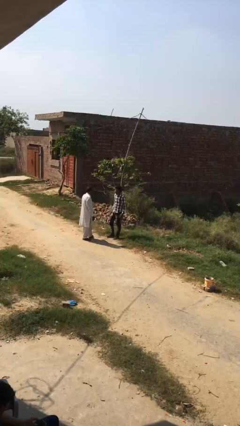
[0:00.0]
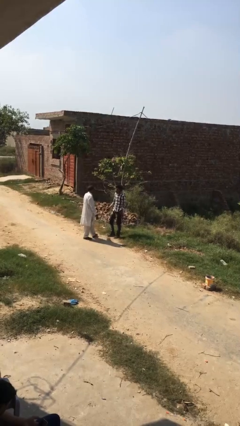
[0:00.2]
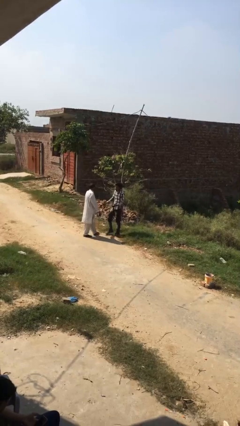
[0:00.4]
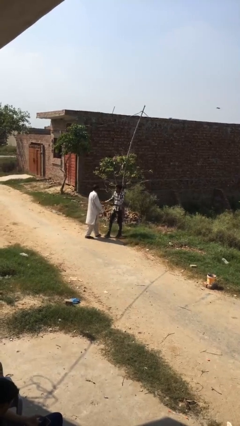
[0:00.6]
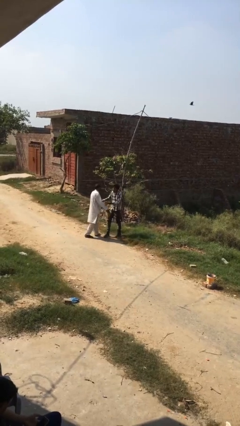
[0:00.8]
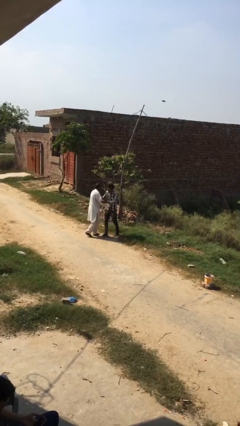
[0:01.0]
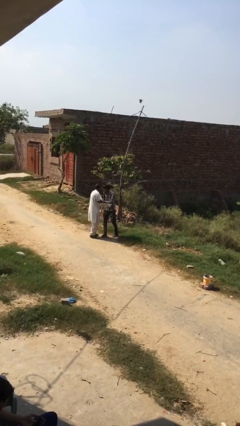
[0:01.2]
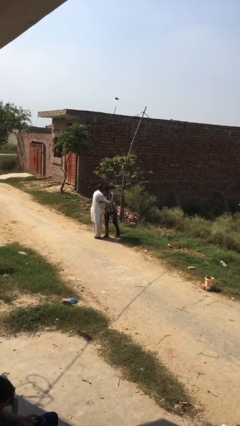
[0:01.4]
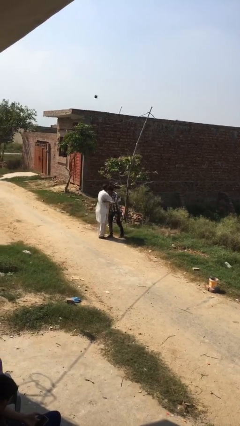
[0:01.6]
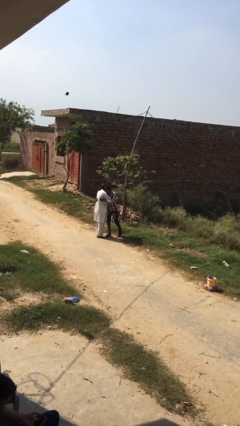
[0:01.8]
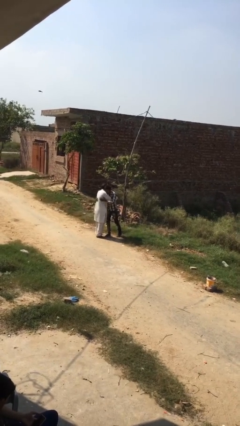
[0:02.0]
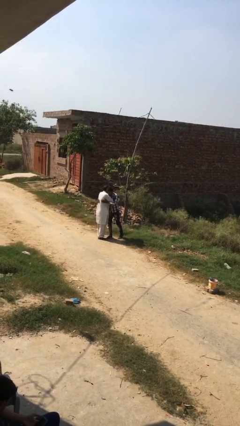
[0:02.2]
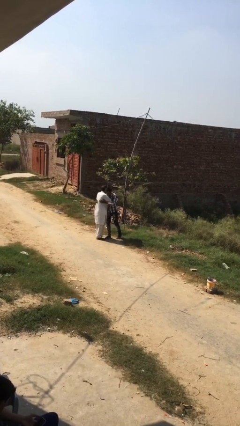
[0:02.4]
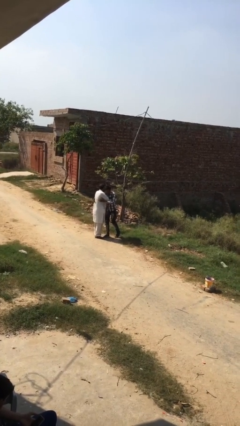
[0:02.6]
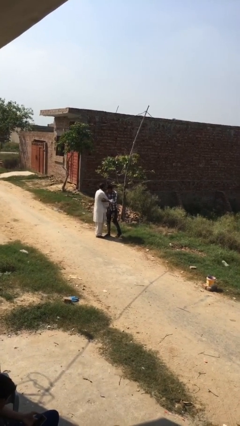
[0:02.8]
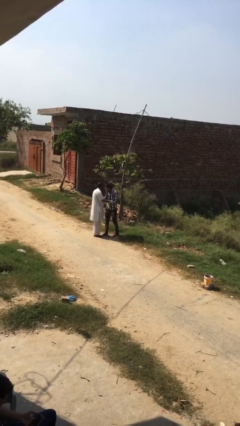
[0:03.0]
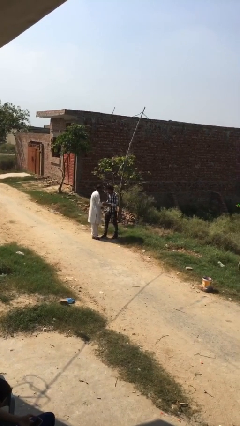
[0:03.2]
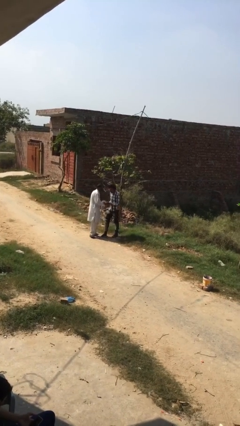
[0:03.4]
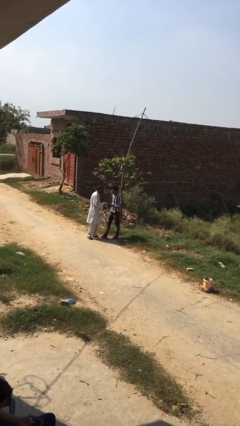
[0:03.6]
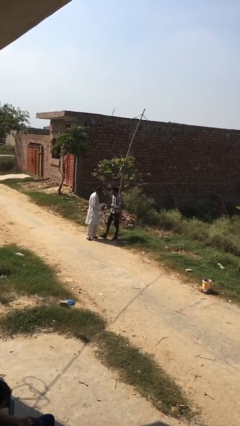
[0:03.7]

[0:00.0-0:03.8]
person embraces person

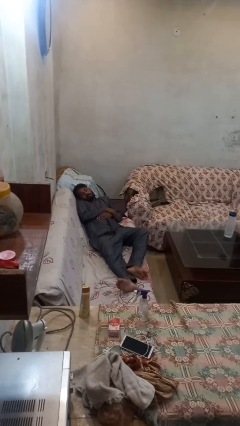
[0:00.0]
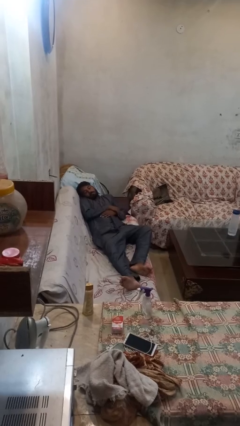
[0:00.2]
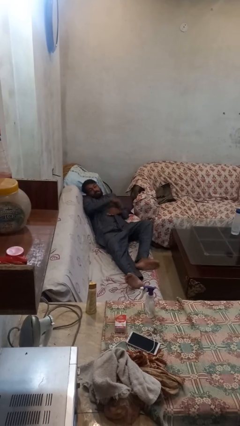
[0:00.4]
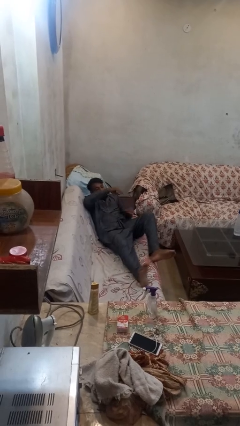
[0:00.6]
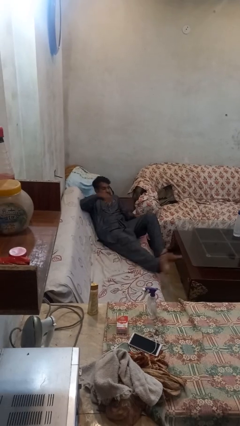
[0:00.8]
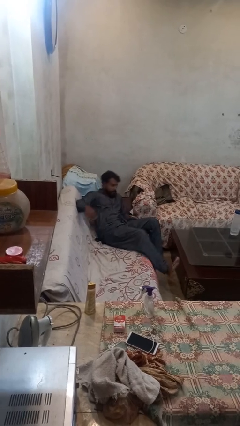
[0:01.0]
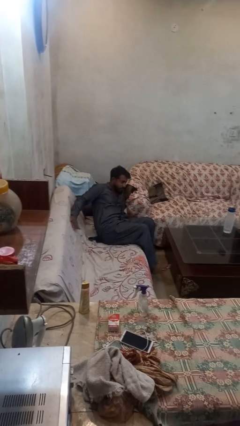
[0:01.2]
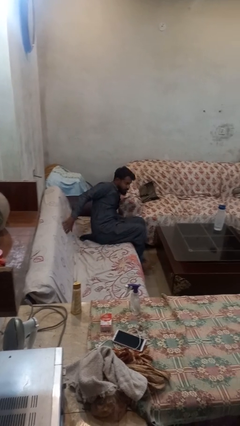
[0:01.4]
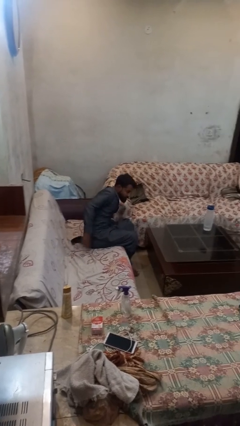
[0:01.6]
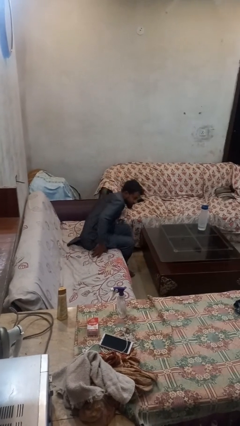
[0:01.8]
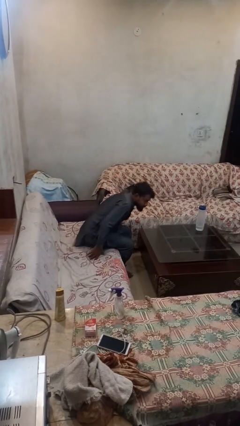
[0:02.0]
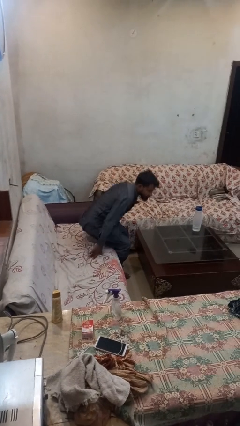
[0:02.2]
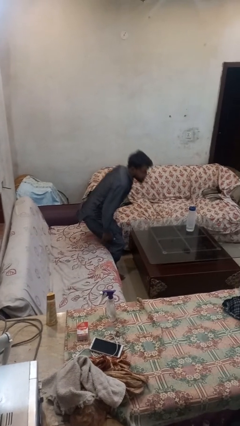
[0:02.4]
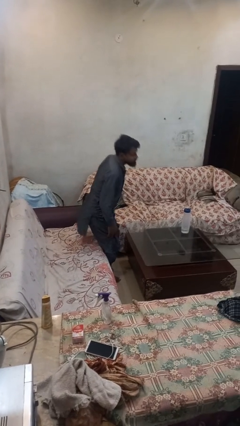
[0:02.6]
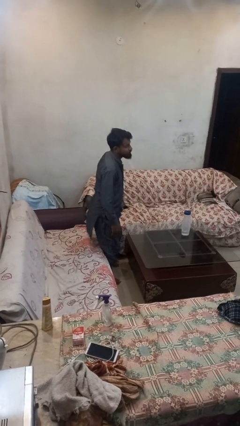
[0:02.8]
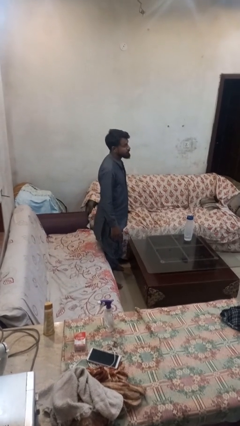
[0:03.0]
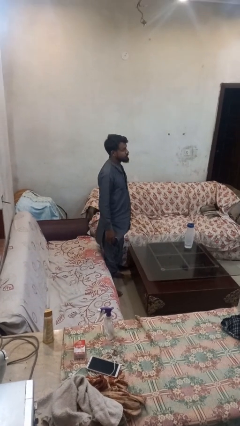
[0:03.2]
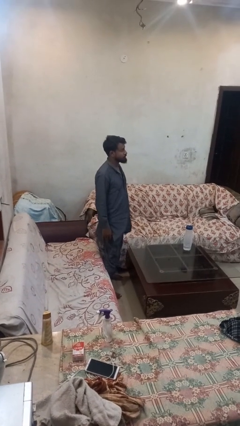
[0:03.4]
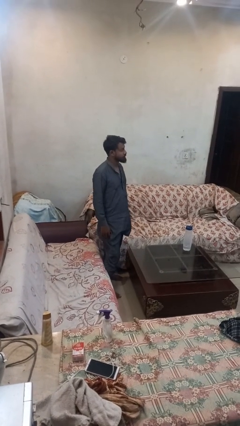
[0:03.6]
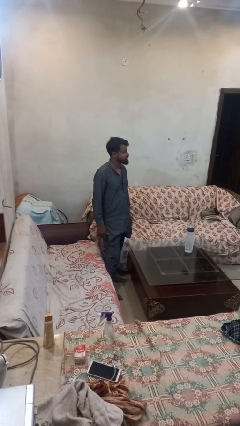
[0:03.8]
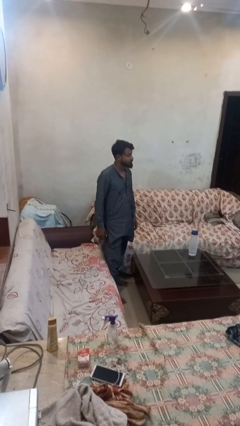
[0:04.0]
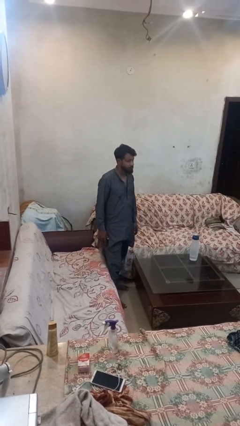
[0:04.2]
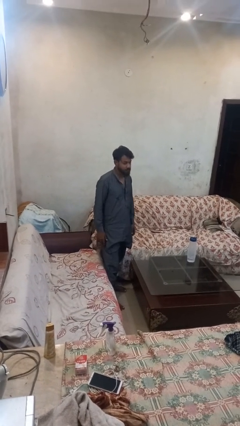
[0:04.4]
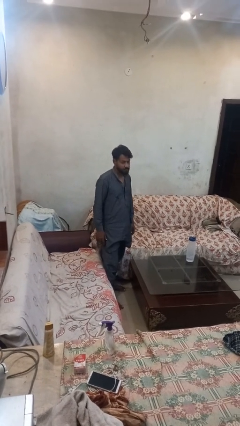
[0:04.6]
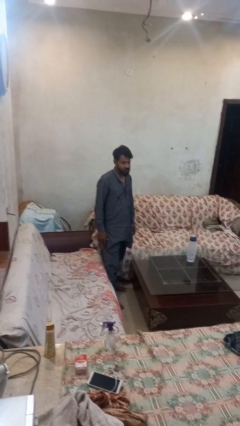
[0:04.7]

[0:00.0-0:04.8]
person stands up

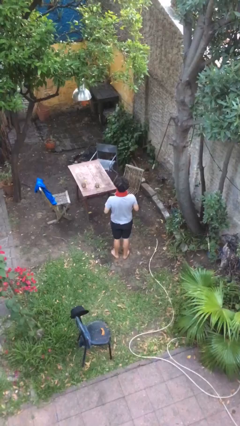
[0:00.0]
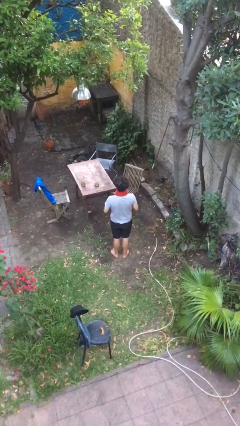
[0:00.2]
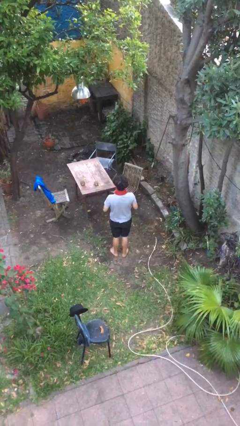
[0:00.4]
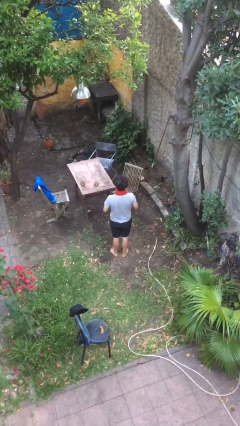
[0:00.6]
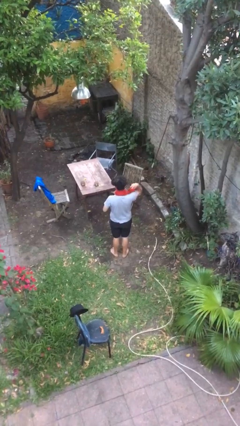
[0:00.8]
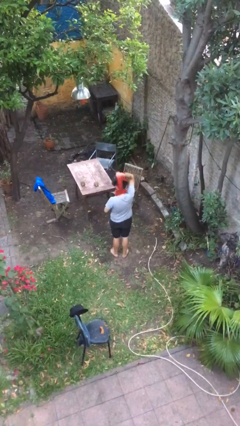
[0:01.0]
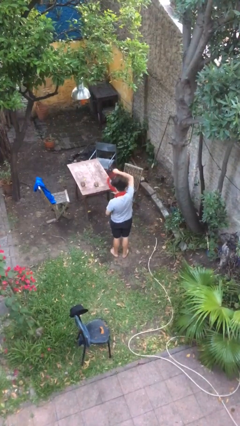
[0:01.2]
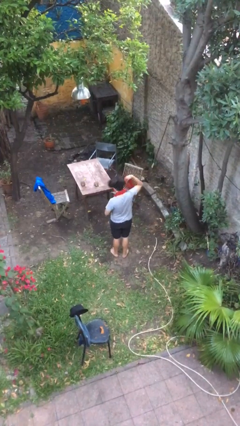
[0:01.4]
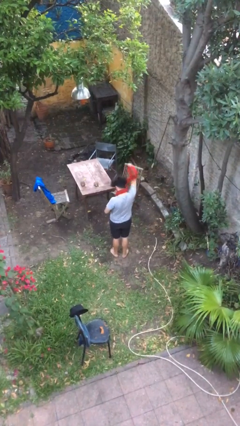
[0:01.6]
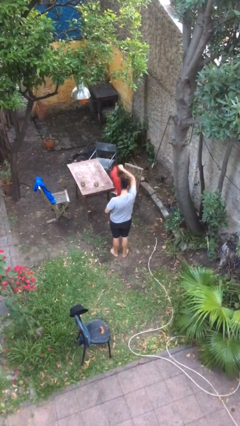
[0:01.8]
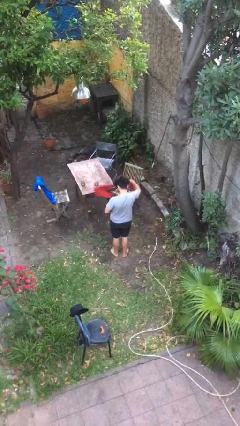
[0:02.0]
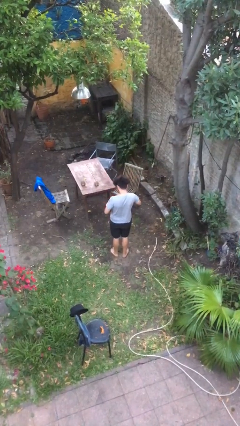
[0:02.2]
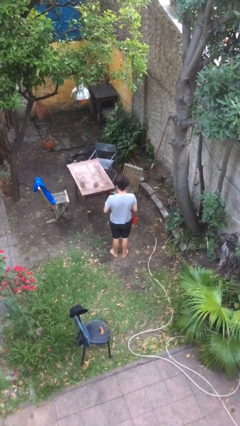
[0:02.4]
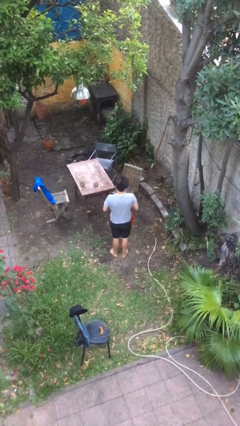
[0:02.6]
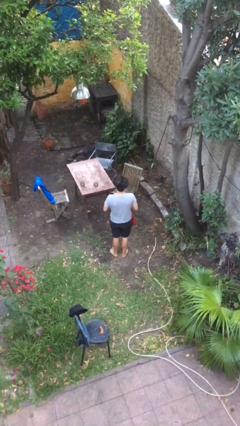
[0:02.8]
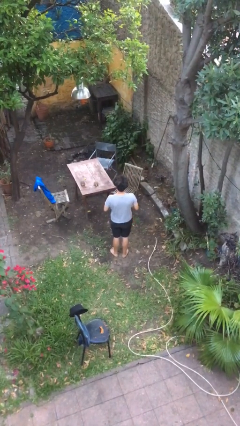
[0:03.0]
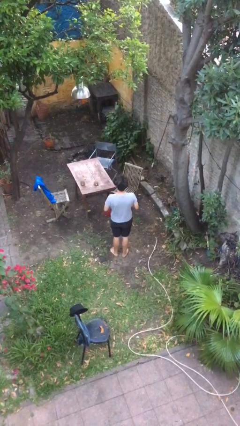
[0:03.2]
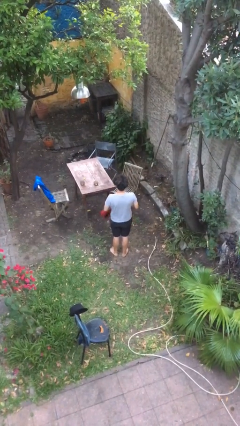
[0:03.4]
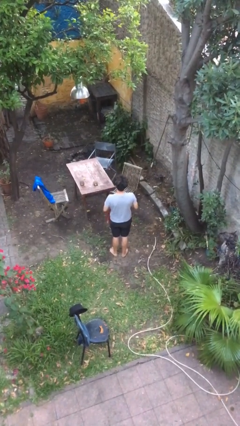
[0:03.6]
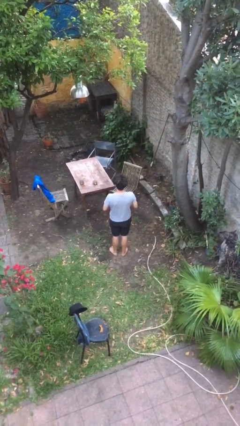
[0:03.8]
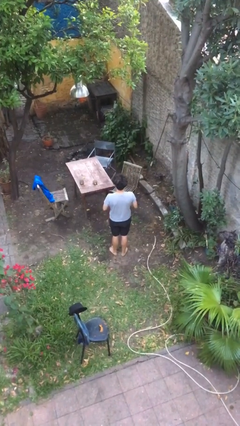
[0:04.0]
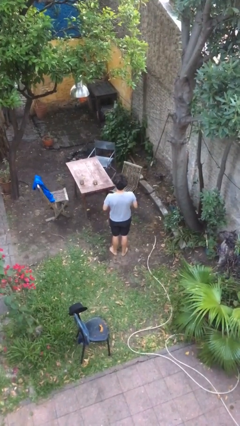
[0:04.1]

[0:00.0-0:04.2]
person takes off scarf

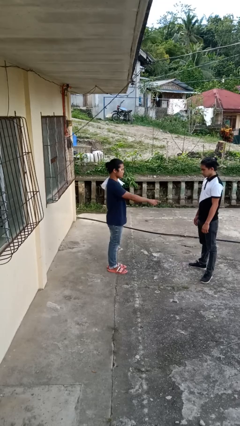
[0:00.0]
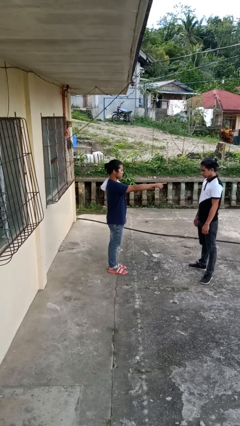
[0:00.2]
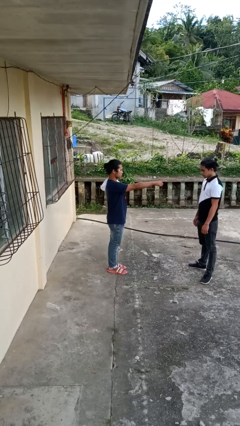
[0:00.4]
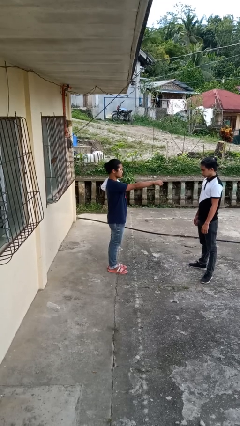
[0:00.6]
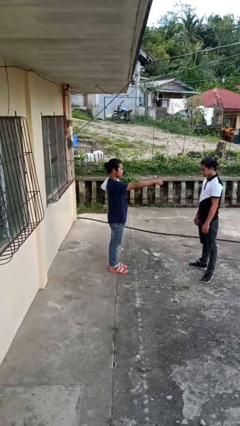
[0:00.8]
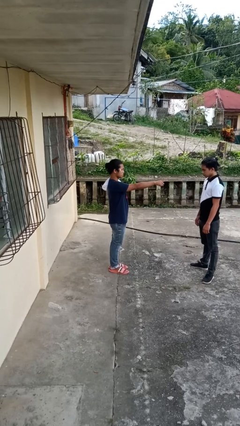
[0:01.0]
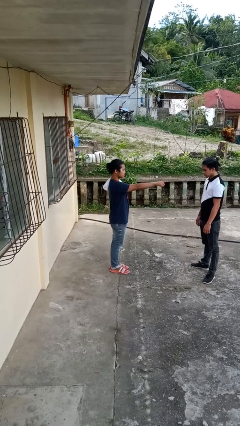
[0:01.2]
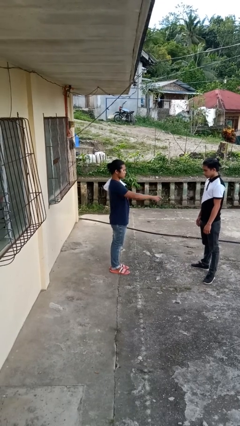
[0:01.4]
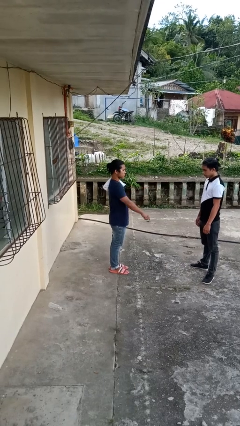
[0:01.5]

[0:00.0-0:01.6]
person points at person

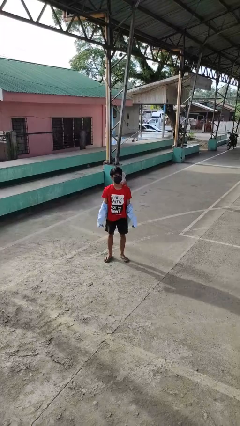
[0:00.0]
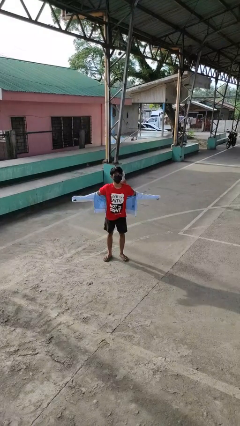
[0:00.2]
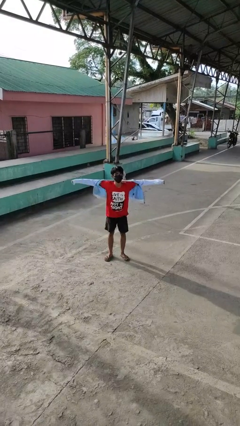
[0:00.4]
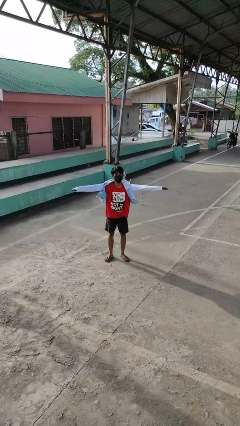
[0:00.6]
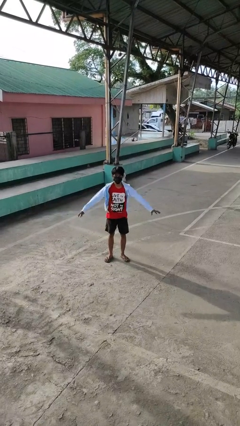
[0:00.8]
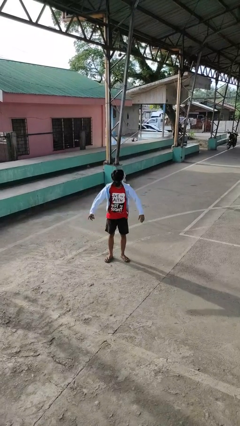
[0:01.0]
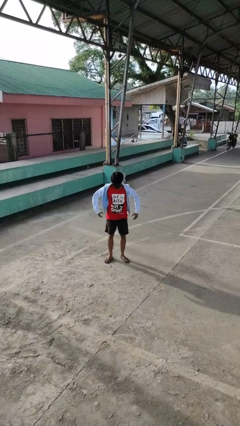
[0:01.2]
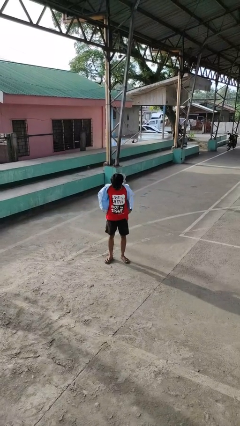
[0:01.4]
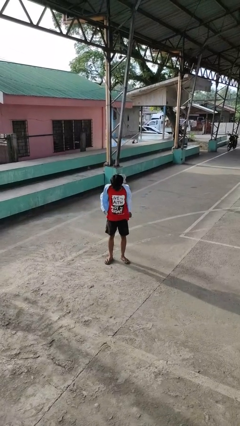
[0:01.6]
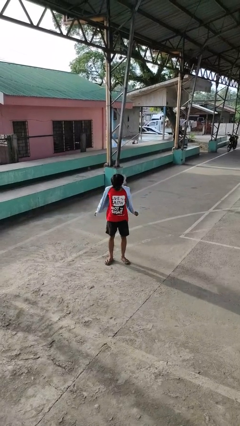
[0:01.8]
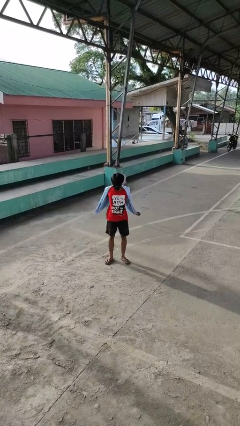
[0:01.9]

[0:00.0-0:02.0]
person puts on jacket

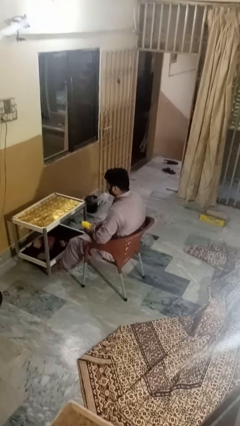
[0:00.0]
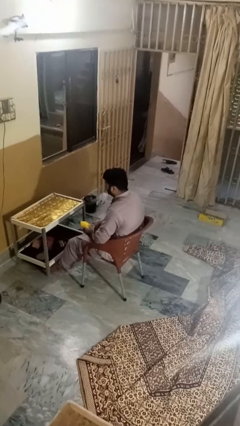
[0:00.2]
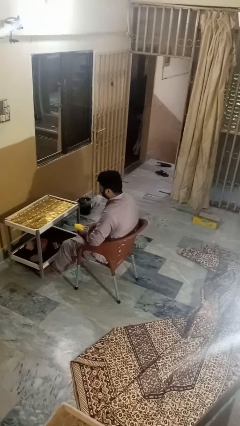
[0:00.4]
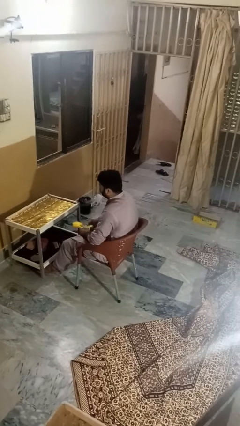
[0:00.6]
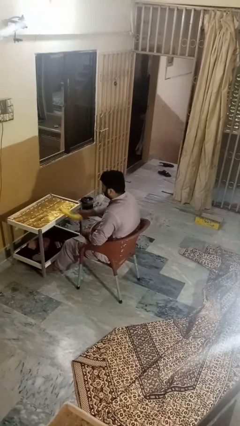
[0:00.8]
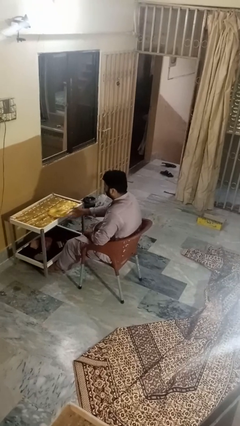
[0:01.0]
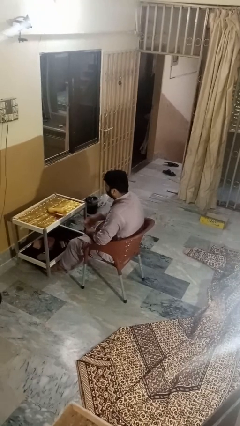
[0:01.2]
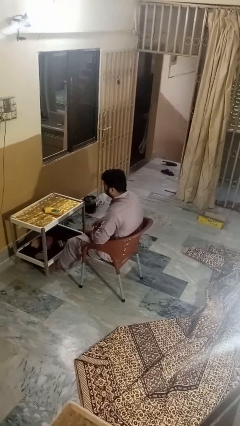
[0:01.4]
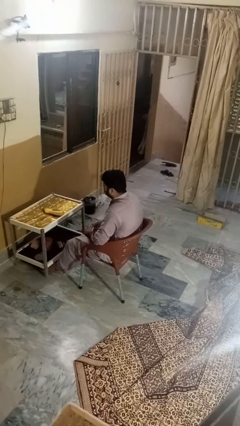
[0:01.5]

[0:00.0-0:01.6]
person throws object on table
